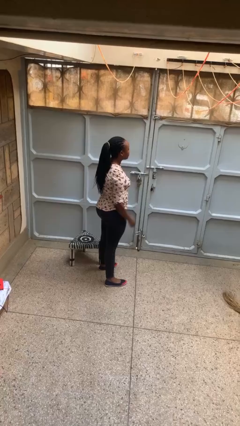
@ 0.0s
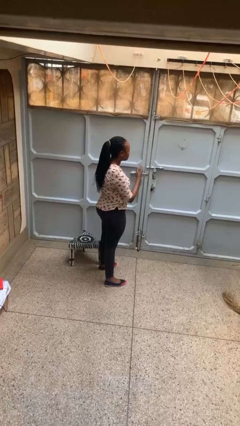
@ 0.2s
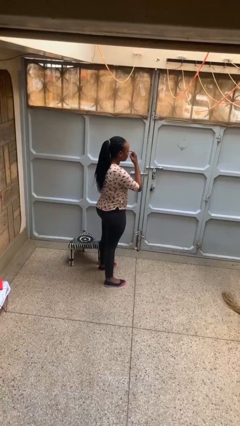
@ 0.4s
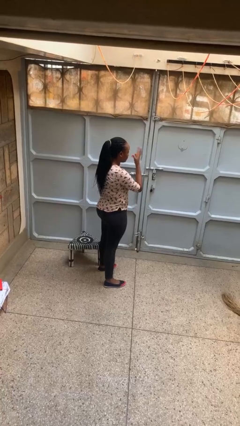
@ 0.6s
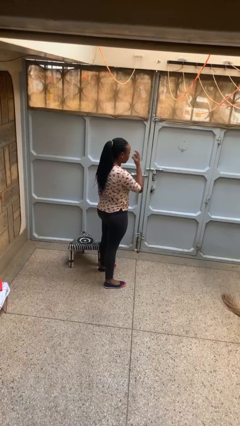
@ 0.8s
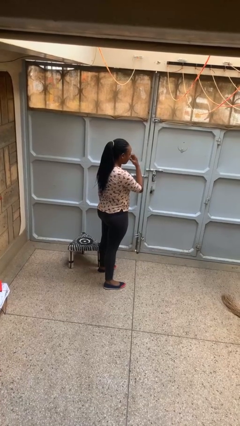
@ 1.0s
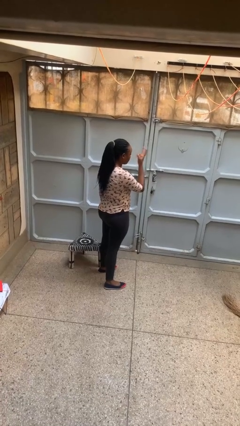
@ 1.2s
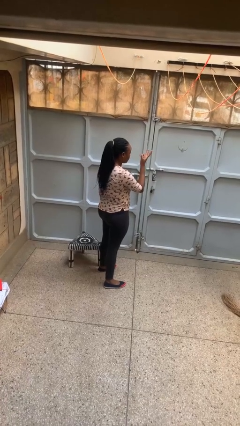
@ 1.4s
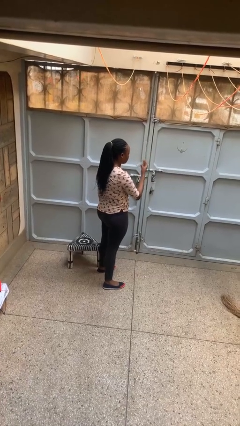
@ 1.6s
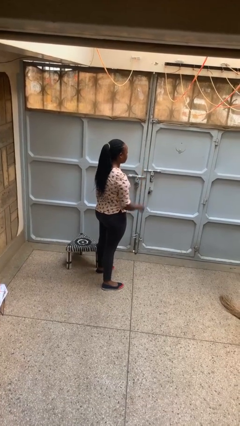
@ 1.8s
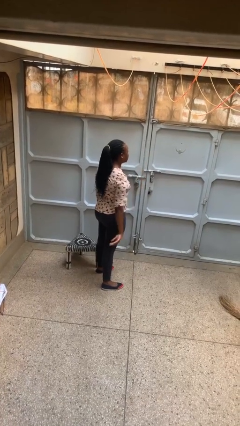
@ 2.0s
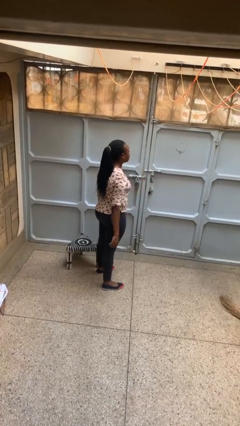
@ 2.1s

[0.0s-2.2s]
person gestures watch closely

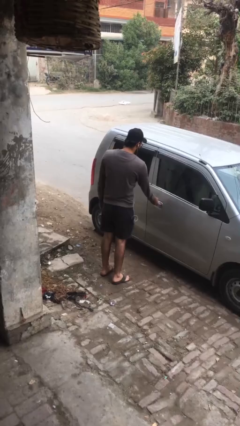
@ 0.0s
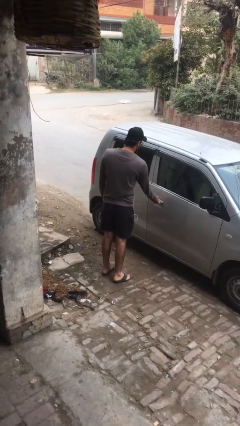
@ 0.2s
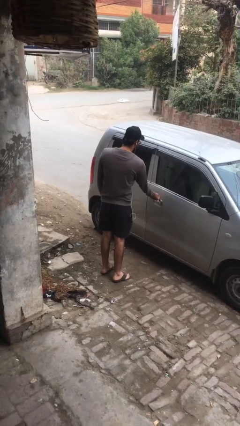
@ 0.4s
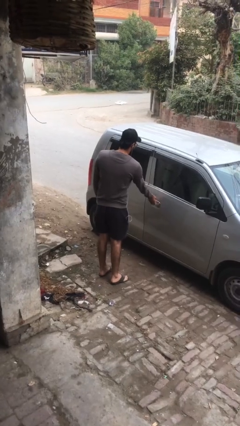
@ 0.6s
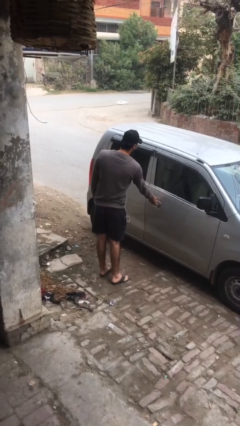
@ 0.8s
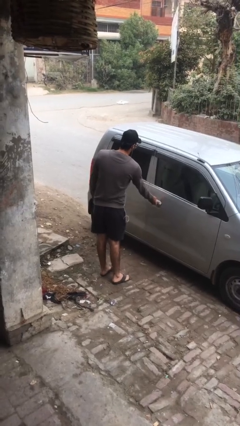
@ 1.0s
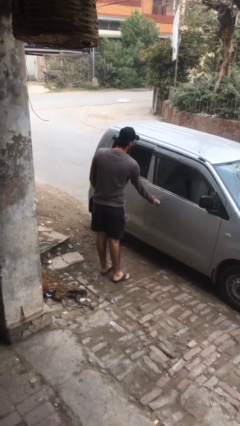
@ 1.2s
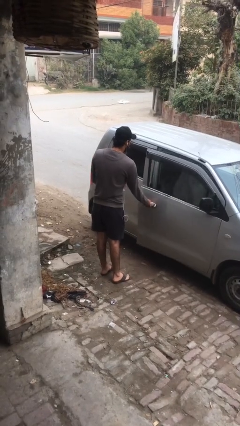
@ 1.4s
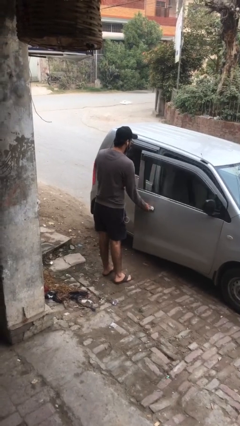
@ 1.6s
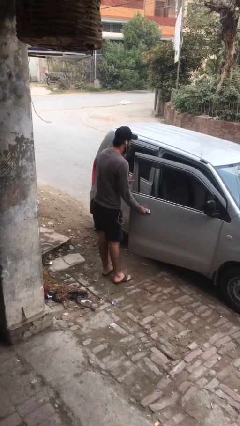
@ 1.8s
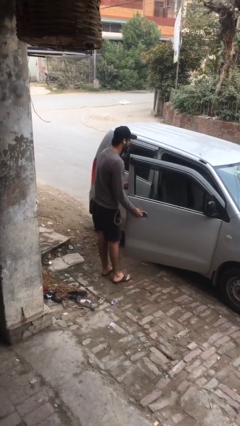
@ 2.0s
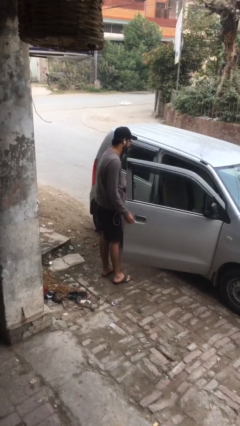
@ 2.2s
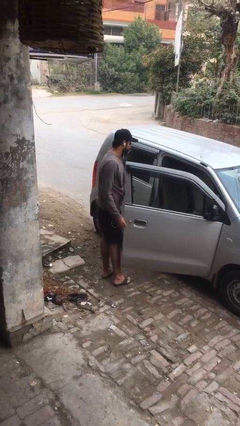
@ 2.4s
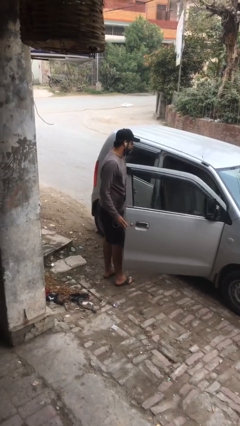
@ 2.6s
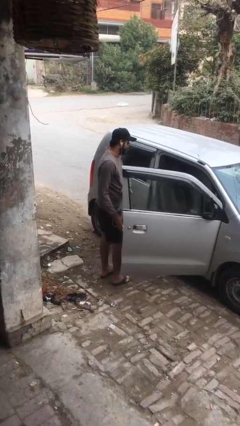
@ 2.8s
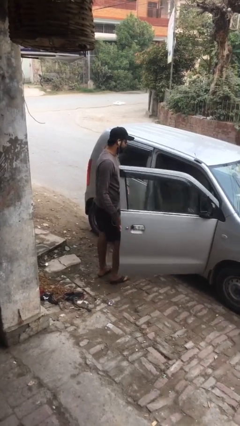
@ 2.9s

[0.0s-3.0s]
person opens car door

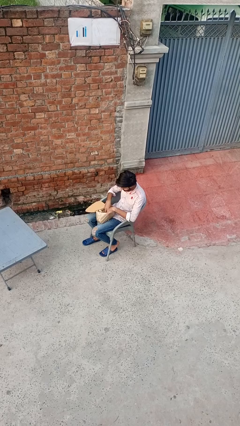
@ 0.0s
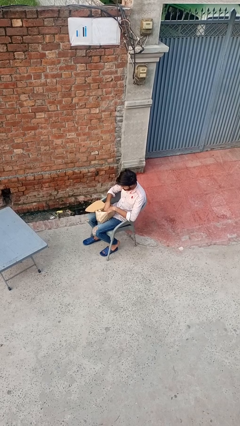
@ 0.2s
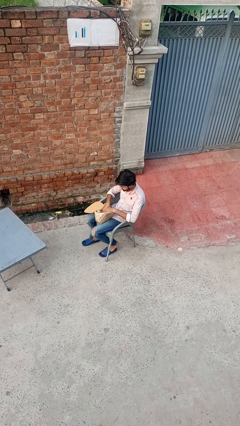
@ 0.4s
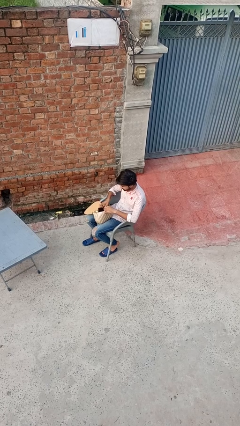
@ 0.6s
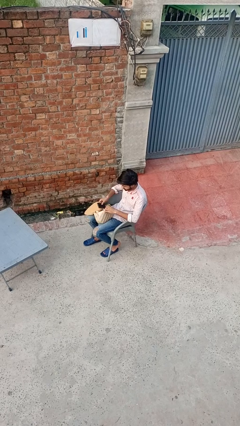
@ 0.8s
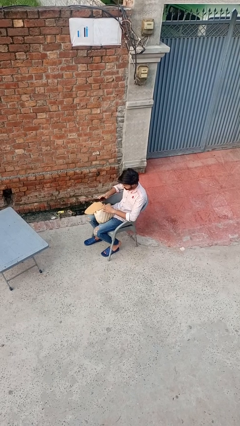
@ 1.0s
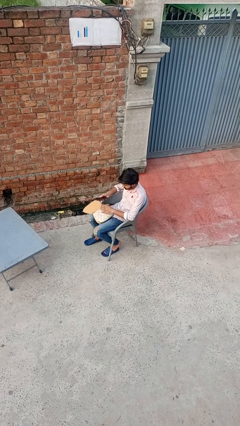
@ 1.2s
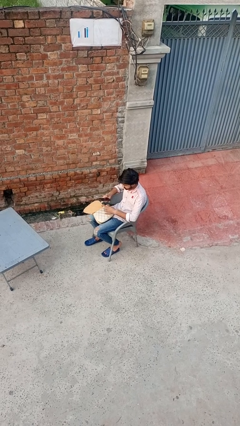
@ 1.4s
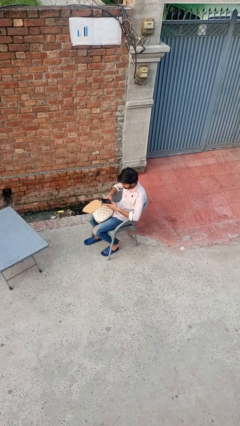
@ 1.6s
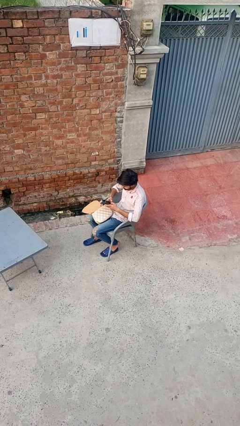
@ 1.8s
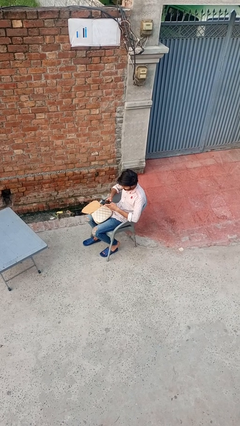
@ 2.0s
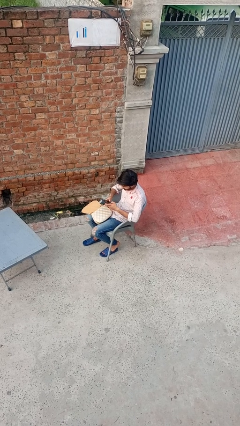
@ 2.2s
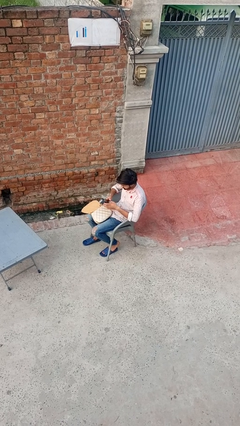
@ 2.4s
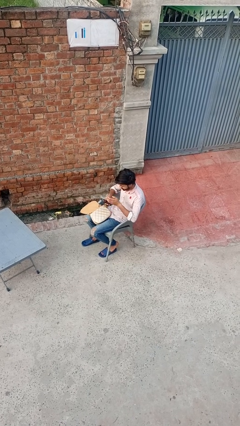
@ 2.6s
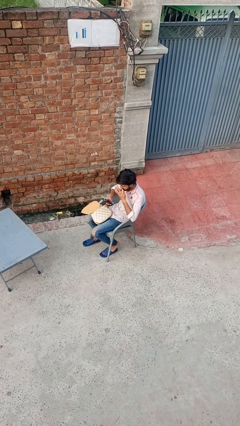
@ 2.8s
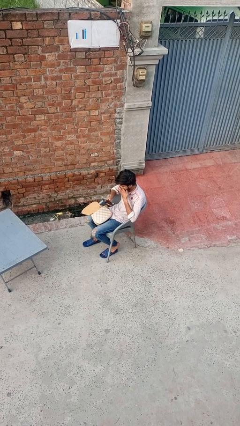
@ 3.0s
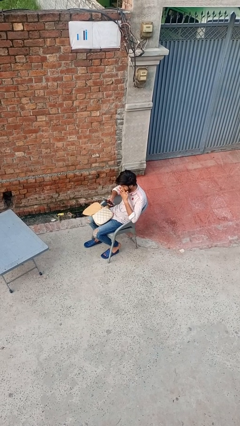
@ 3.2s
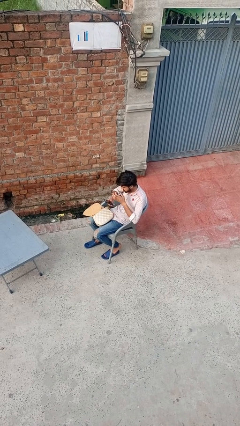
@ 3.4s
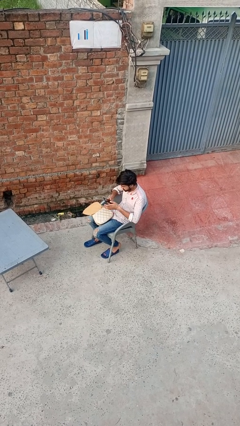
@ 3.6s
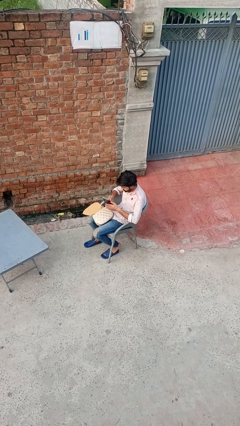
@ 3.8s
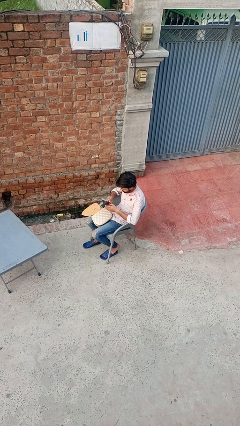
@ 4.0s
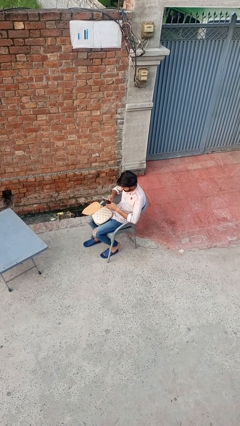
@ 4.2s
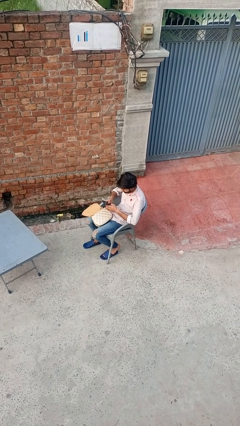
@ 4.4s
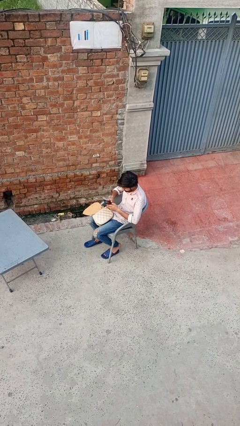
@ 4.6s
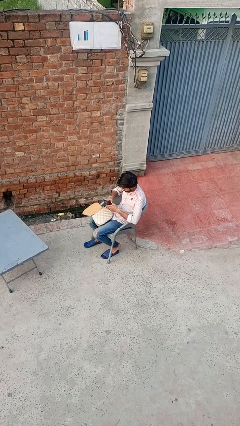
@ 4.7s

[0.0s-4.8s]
person takes object from purse

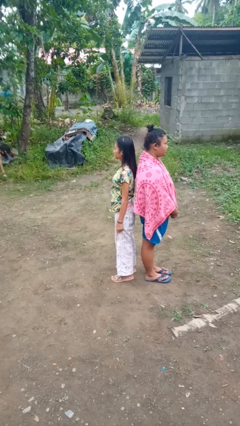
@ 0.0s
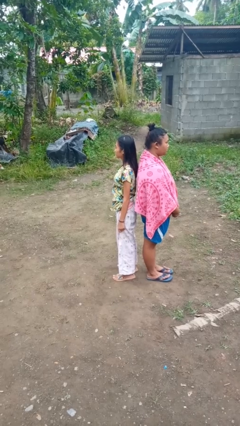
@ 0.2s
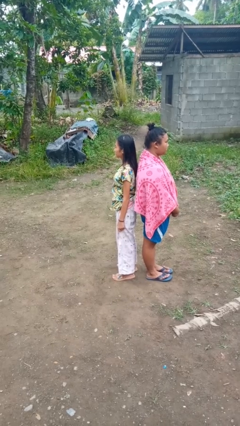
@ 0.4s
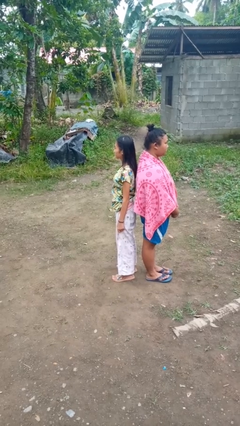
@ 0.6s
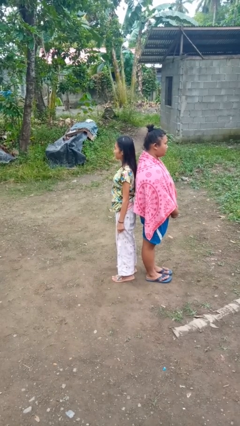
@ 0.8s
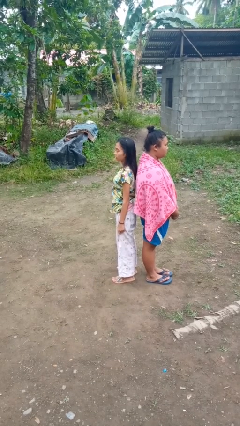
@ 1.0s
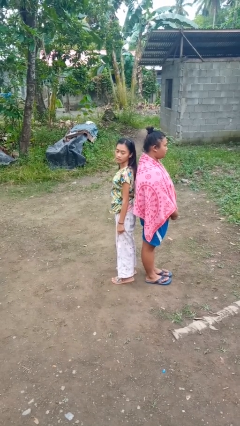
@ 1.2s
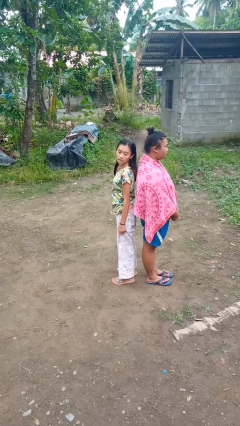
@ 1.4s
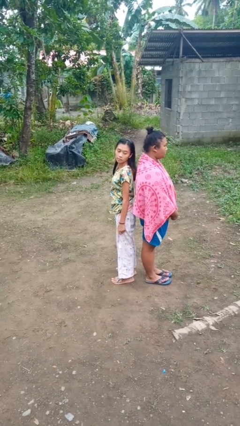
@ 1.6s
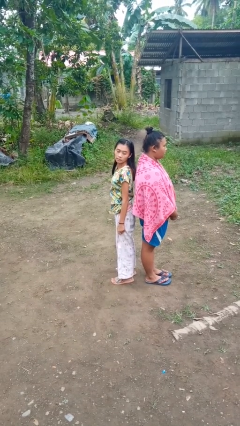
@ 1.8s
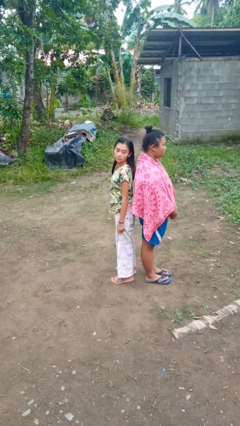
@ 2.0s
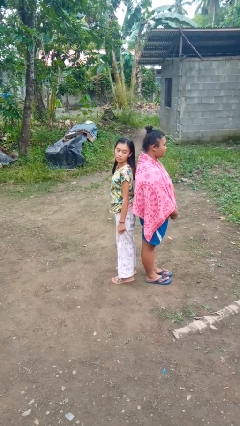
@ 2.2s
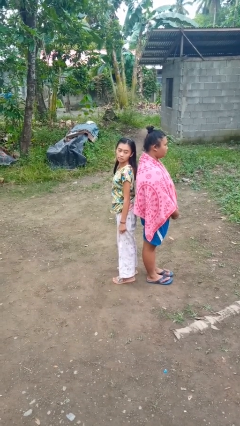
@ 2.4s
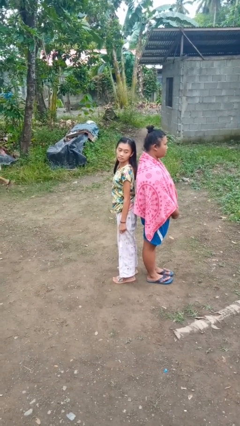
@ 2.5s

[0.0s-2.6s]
person looks over shoulder

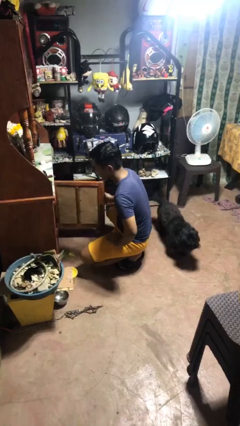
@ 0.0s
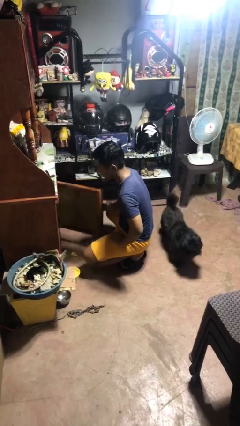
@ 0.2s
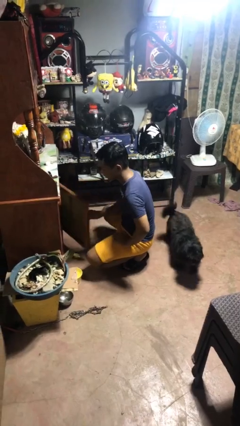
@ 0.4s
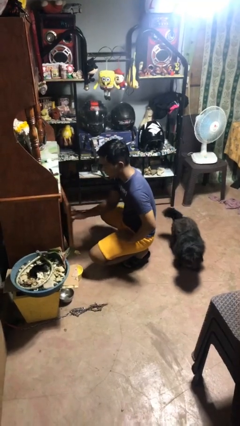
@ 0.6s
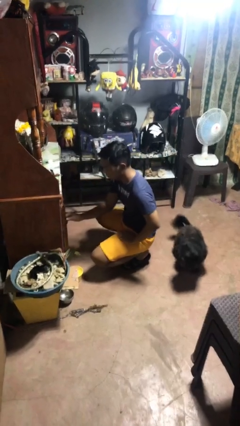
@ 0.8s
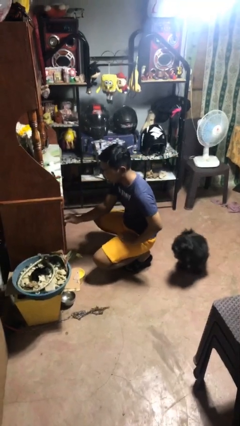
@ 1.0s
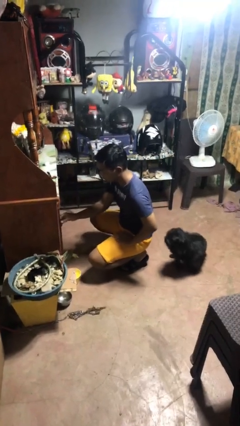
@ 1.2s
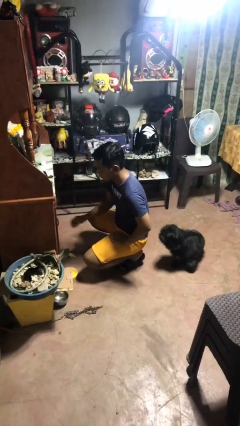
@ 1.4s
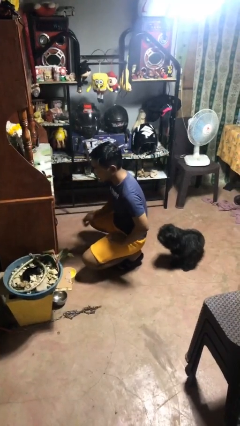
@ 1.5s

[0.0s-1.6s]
person closes cabinet

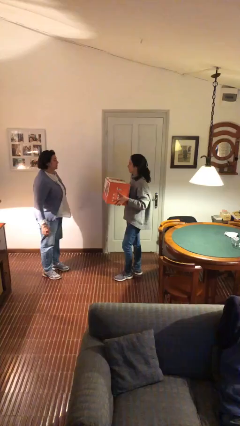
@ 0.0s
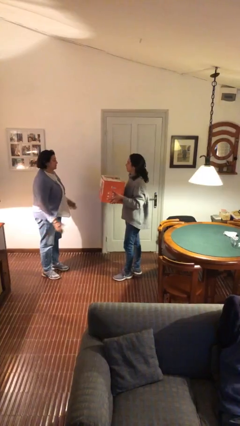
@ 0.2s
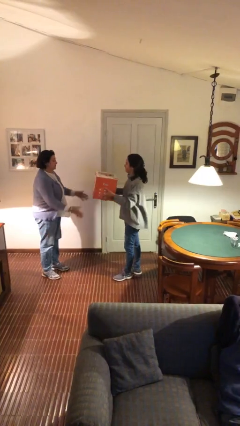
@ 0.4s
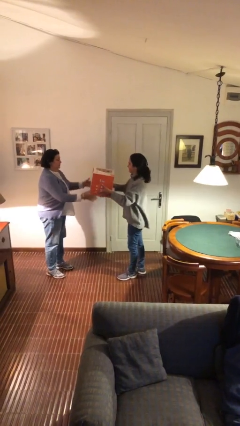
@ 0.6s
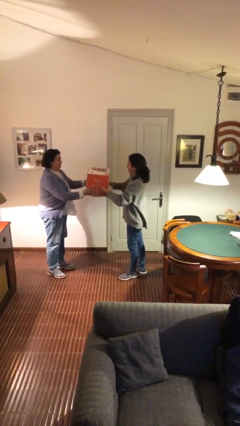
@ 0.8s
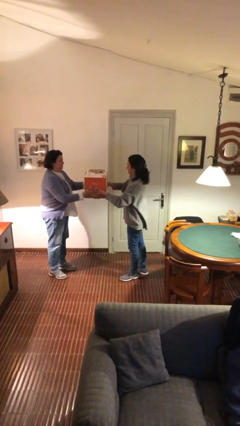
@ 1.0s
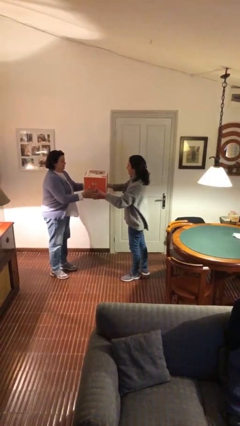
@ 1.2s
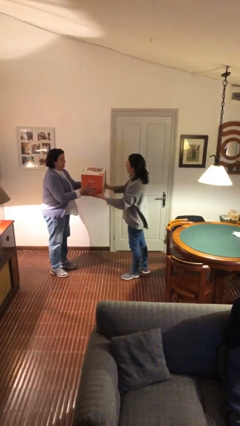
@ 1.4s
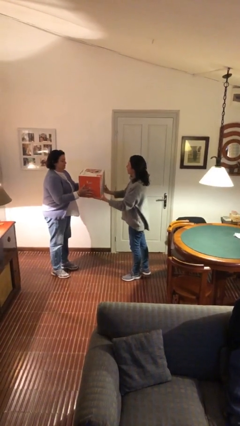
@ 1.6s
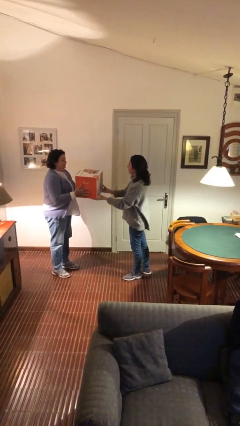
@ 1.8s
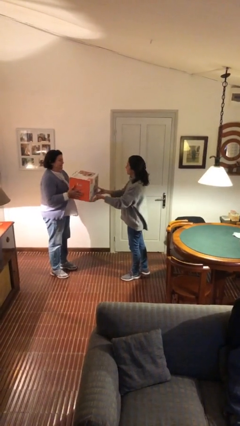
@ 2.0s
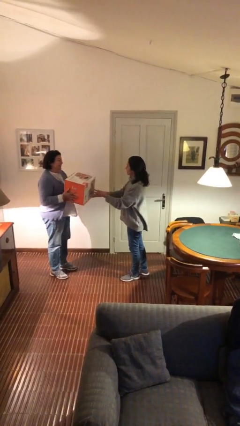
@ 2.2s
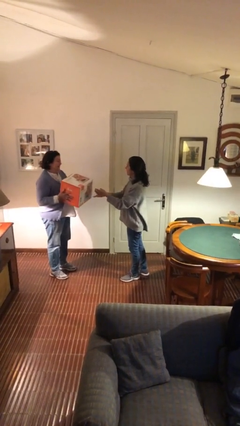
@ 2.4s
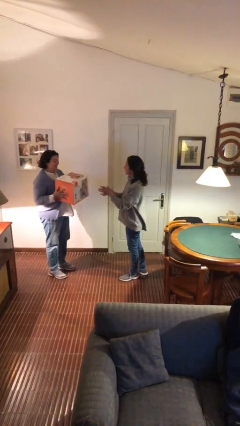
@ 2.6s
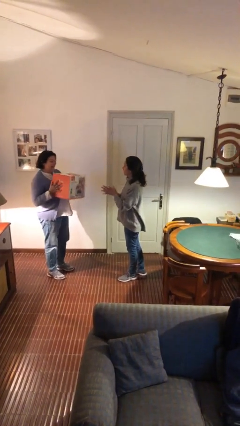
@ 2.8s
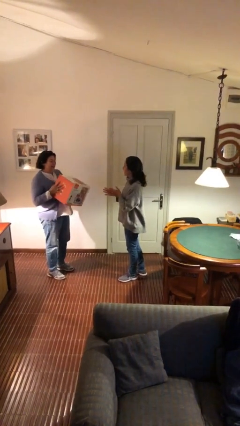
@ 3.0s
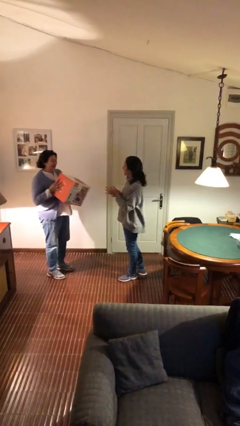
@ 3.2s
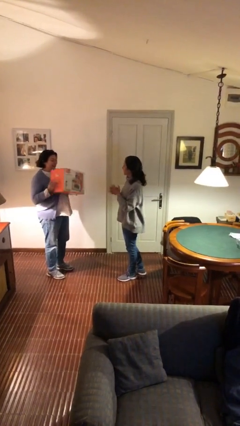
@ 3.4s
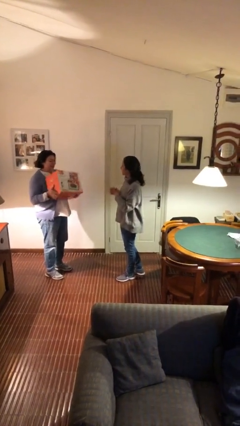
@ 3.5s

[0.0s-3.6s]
person transfers object to person
